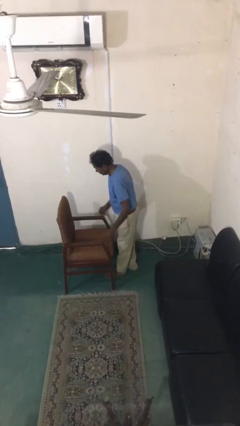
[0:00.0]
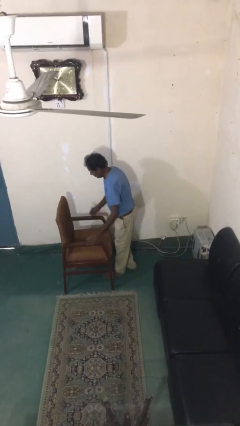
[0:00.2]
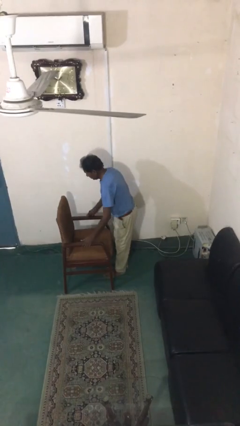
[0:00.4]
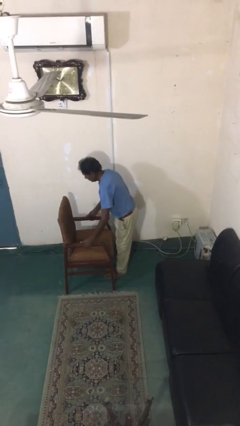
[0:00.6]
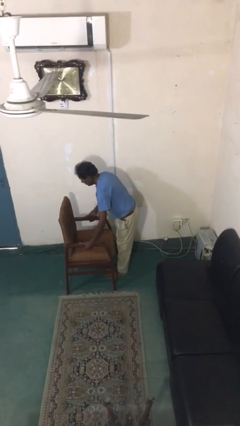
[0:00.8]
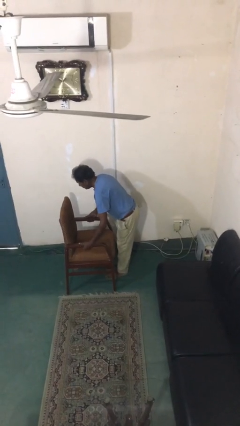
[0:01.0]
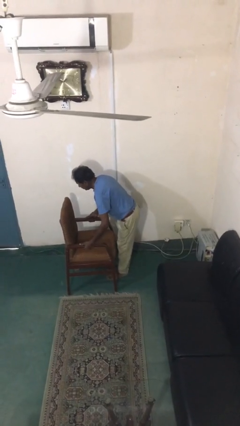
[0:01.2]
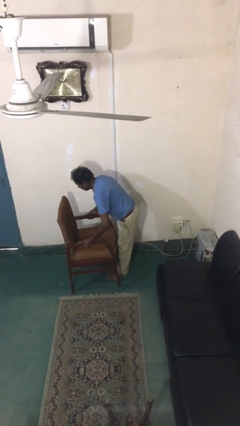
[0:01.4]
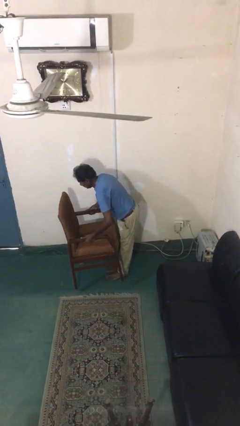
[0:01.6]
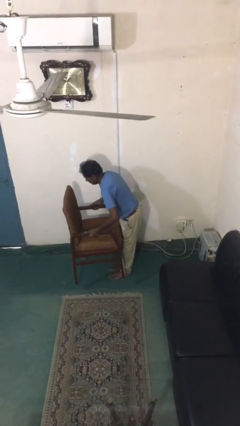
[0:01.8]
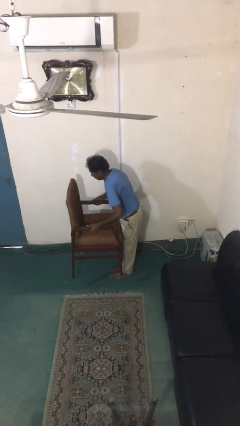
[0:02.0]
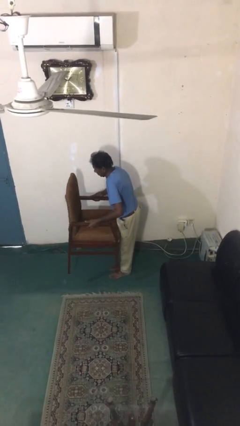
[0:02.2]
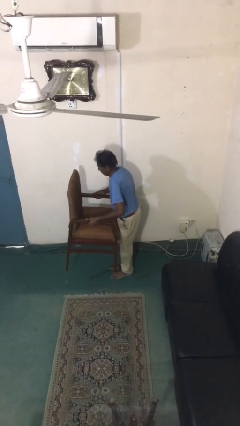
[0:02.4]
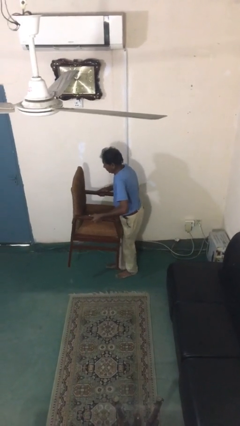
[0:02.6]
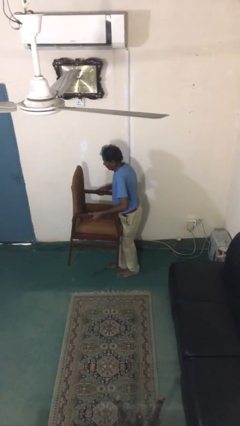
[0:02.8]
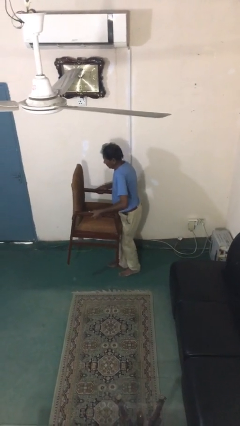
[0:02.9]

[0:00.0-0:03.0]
person picks up object from floor

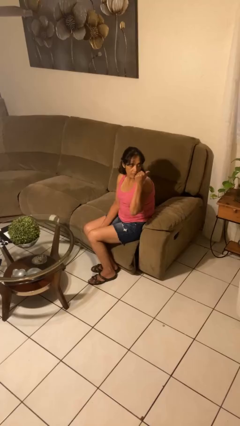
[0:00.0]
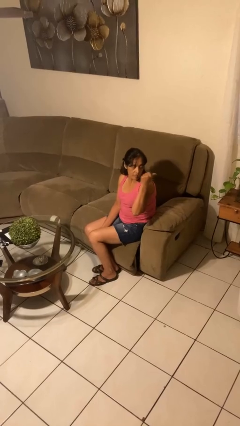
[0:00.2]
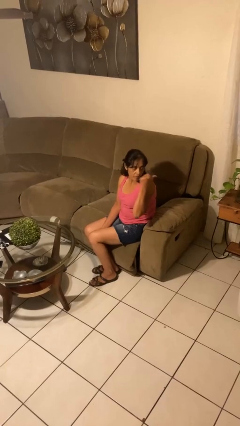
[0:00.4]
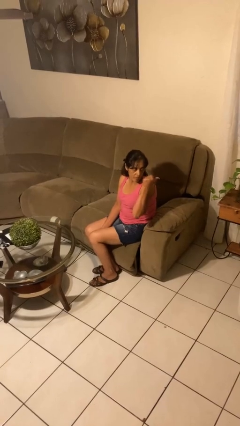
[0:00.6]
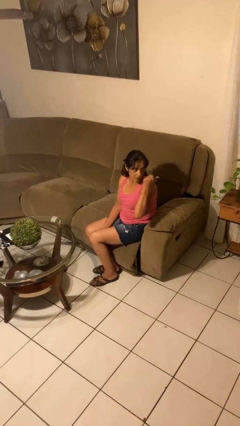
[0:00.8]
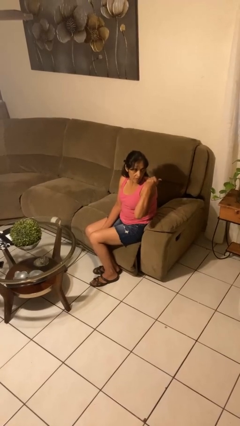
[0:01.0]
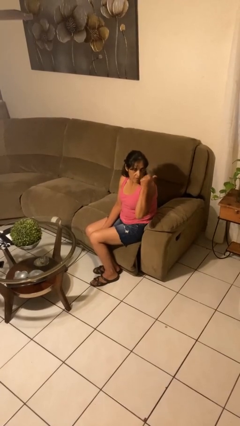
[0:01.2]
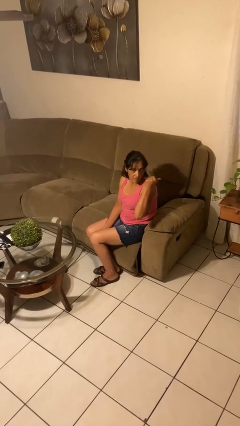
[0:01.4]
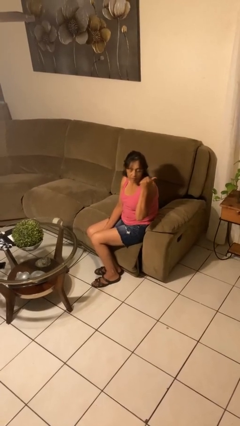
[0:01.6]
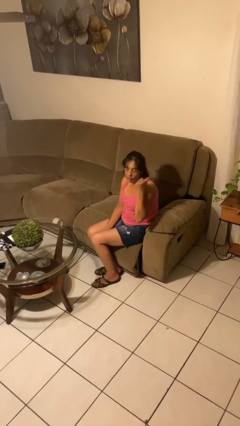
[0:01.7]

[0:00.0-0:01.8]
person gestures behind me

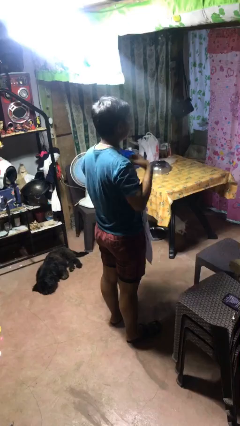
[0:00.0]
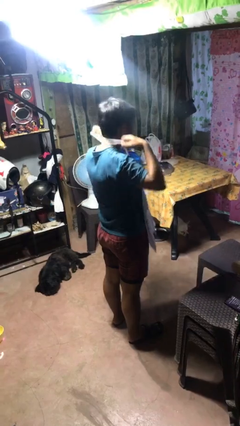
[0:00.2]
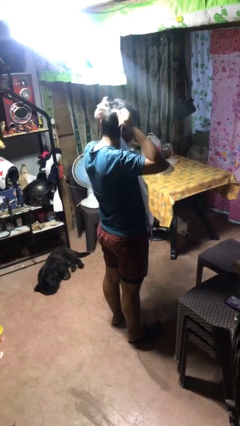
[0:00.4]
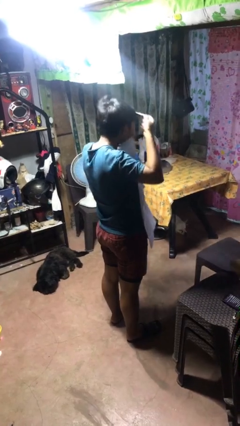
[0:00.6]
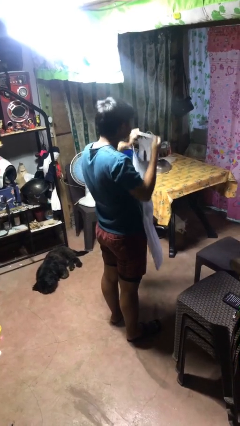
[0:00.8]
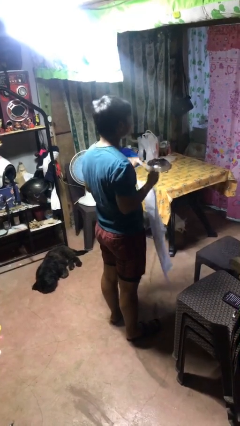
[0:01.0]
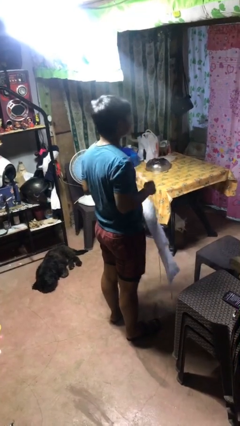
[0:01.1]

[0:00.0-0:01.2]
person takes off apron

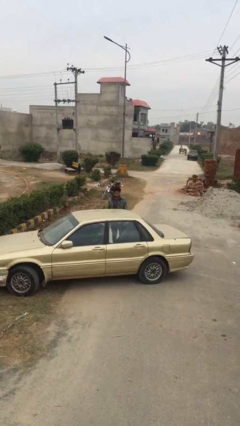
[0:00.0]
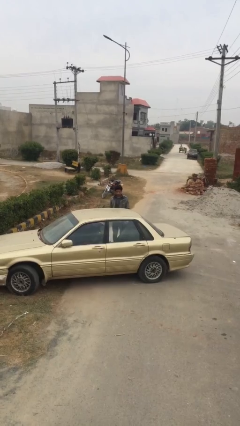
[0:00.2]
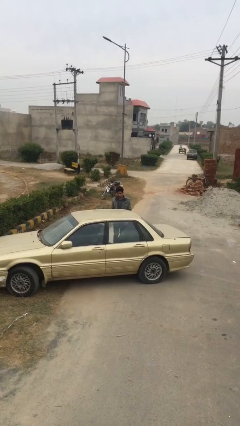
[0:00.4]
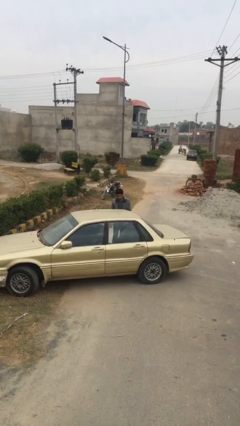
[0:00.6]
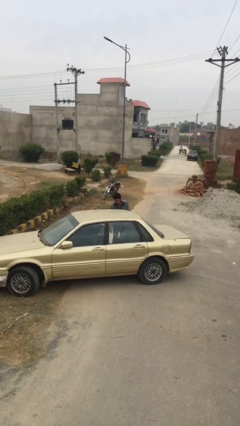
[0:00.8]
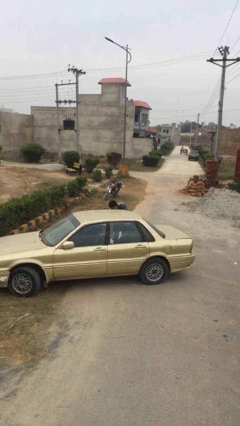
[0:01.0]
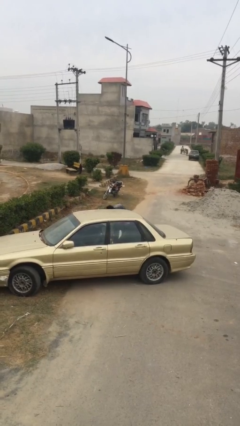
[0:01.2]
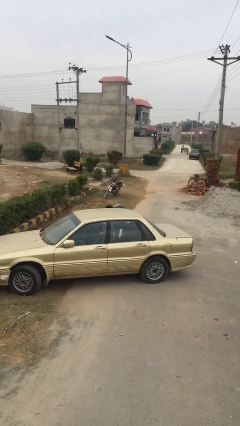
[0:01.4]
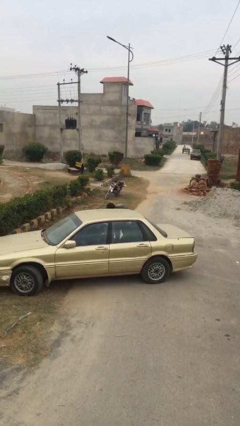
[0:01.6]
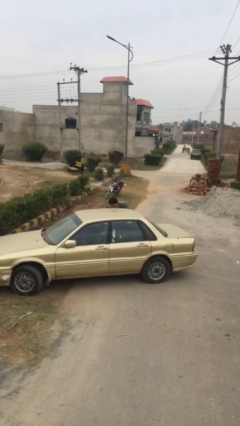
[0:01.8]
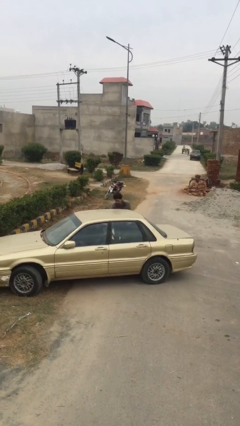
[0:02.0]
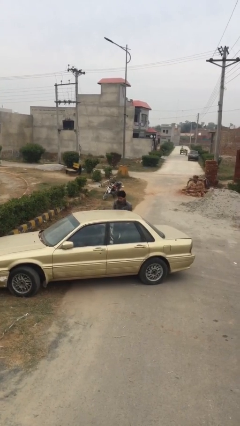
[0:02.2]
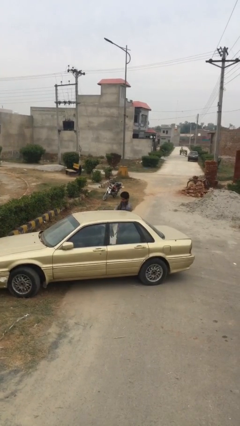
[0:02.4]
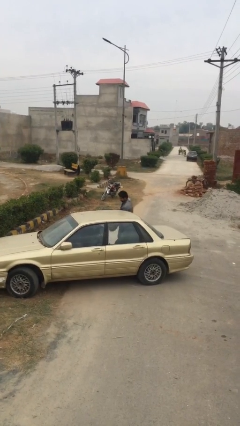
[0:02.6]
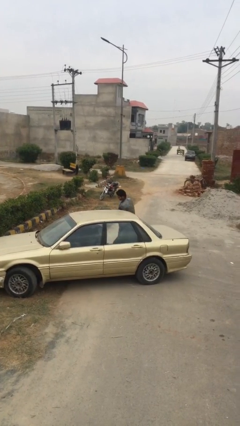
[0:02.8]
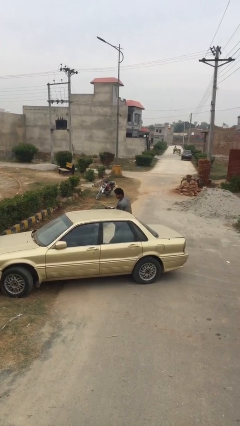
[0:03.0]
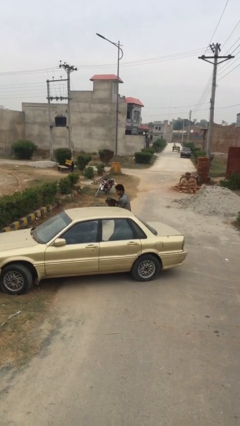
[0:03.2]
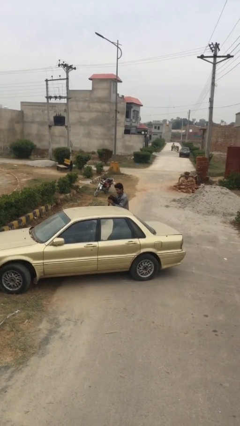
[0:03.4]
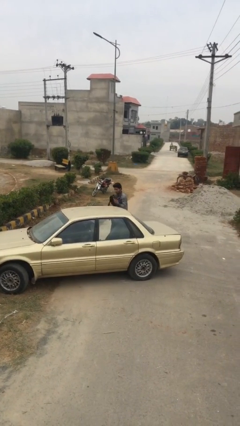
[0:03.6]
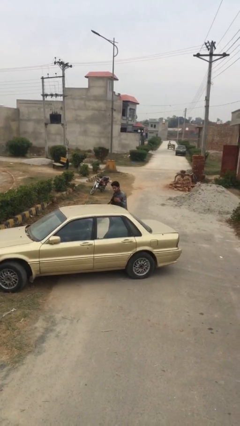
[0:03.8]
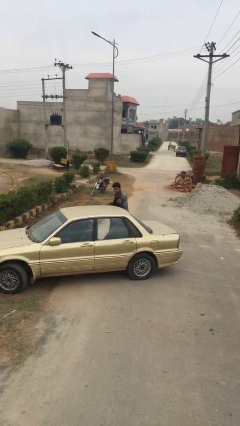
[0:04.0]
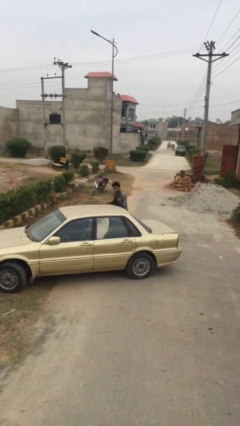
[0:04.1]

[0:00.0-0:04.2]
person unloads car

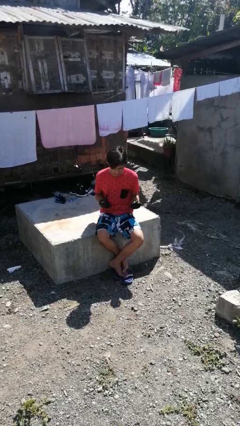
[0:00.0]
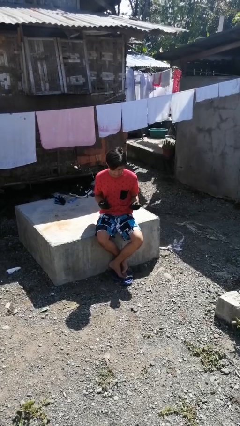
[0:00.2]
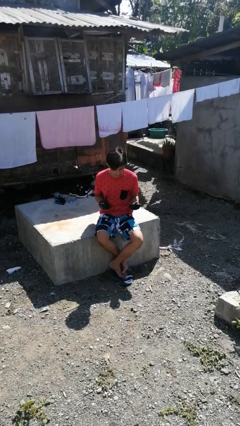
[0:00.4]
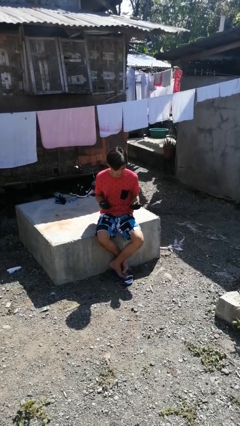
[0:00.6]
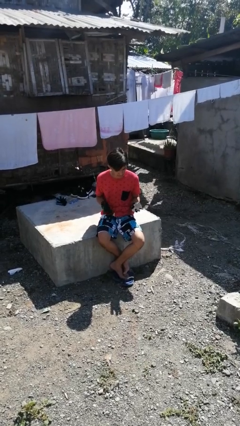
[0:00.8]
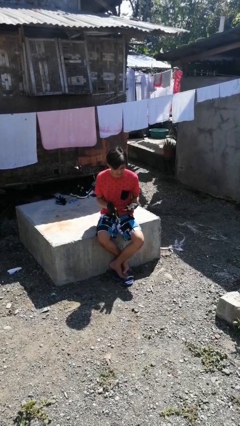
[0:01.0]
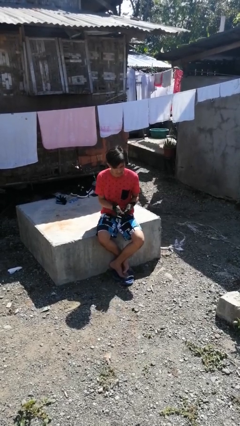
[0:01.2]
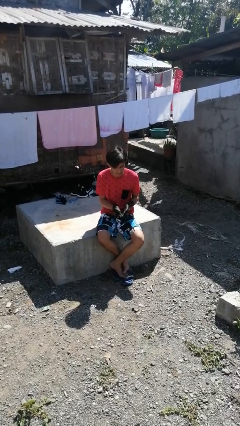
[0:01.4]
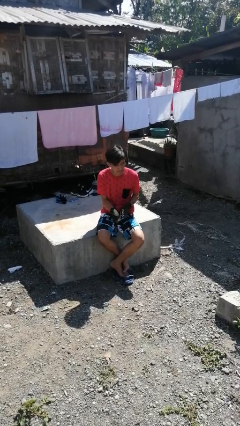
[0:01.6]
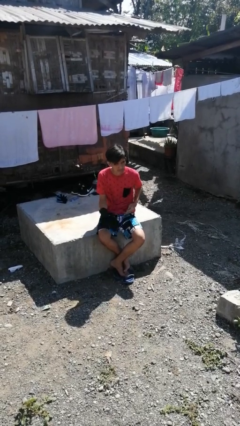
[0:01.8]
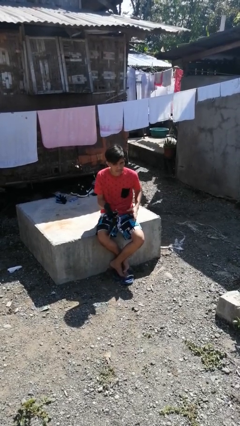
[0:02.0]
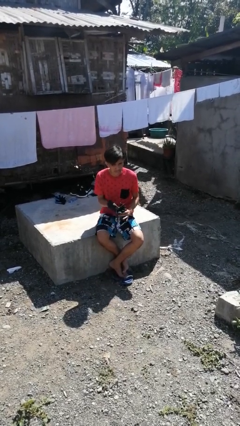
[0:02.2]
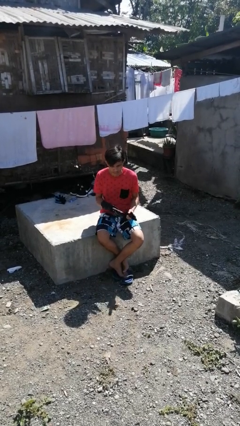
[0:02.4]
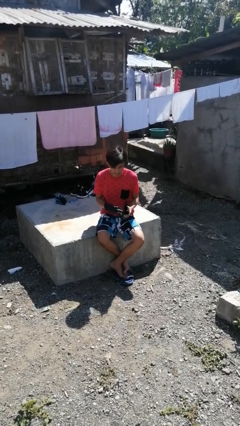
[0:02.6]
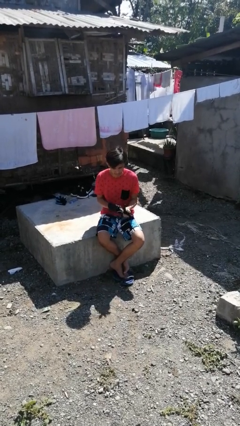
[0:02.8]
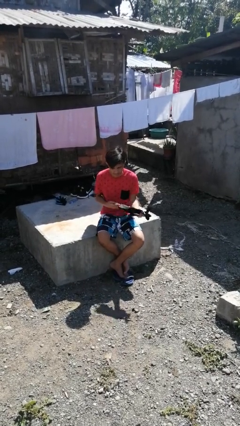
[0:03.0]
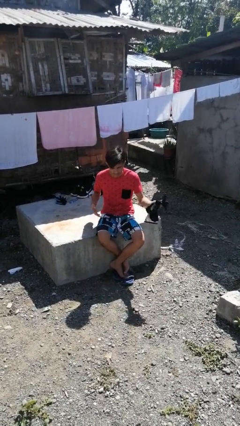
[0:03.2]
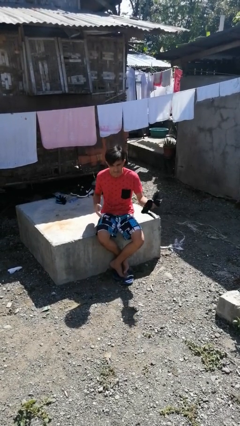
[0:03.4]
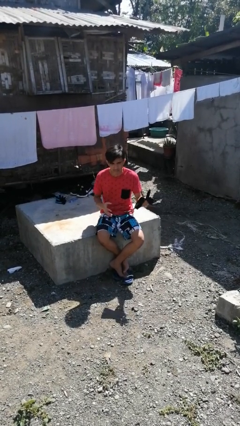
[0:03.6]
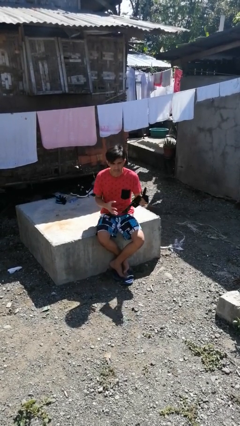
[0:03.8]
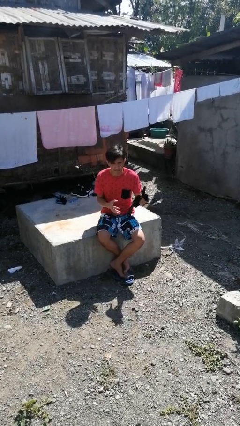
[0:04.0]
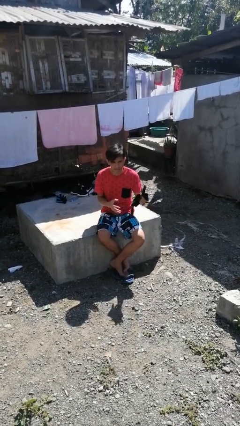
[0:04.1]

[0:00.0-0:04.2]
person takes off gloves

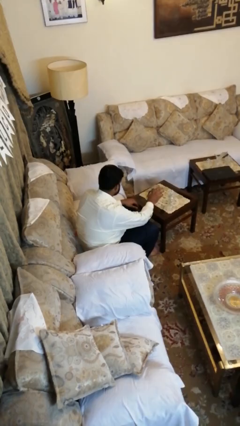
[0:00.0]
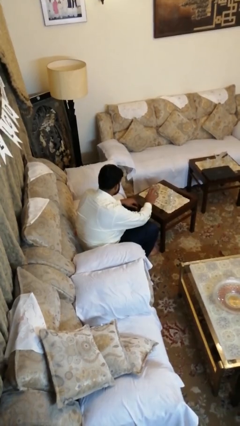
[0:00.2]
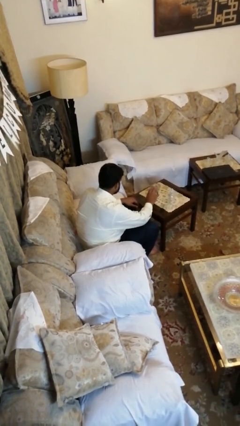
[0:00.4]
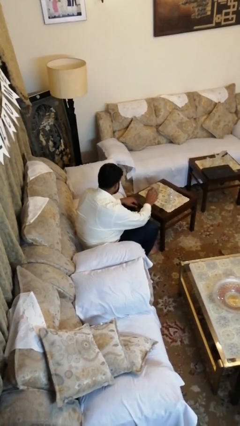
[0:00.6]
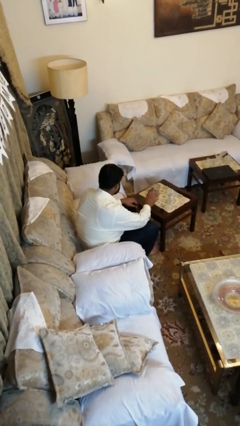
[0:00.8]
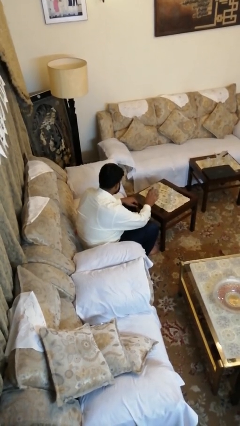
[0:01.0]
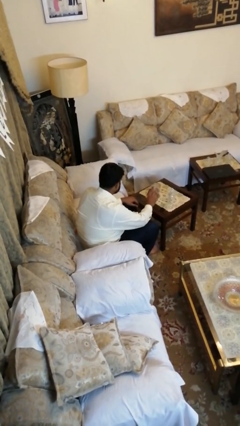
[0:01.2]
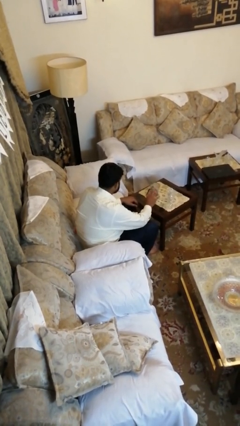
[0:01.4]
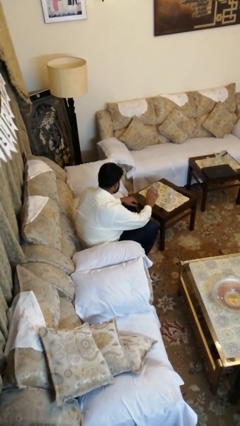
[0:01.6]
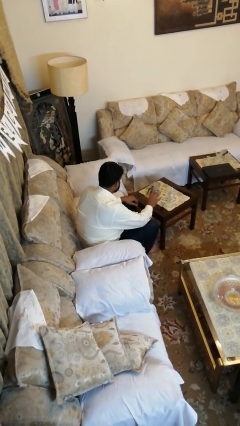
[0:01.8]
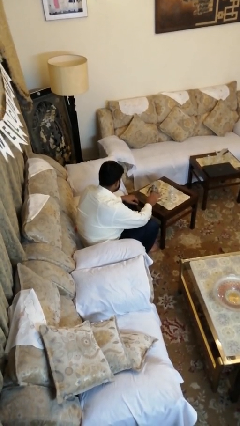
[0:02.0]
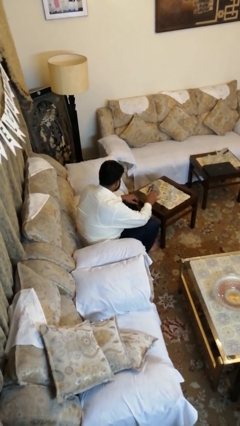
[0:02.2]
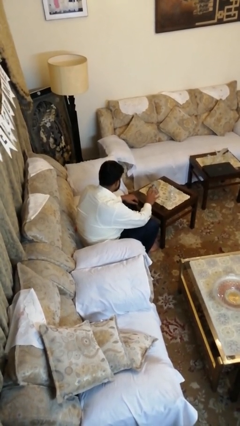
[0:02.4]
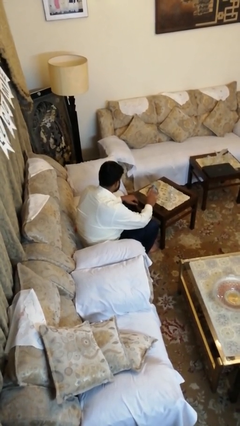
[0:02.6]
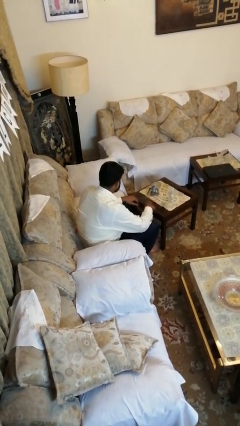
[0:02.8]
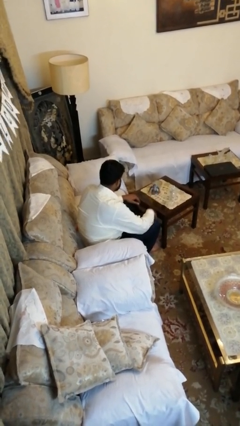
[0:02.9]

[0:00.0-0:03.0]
person waves hand over object
